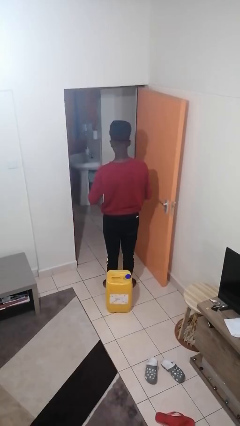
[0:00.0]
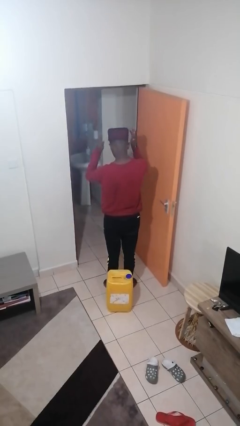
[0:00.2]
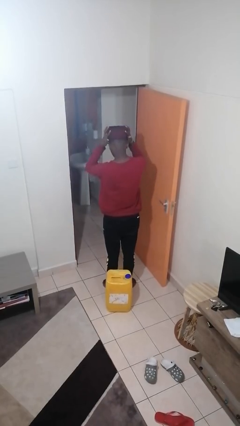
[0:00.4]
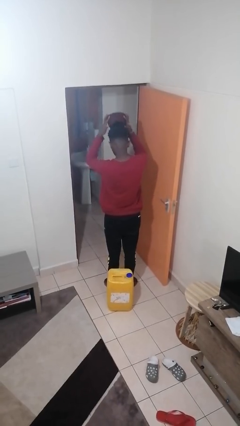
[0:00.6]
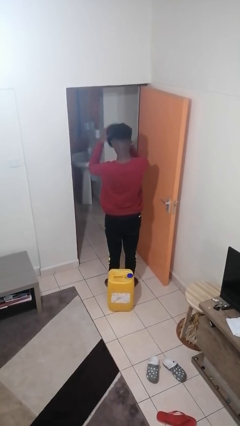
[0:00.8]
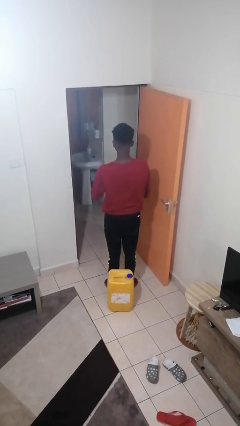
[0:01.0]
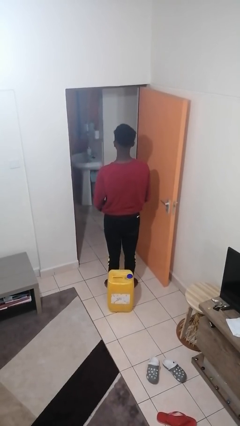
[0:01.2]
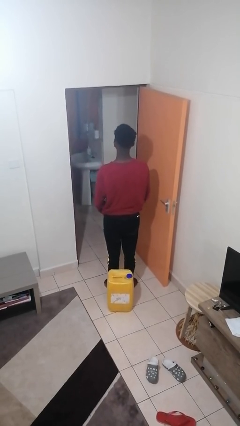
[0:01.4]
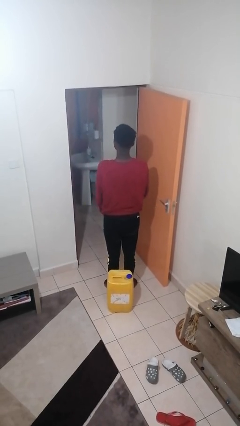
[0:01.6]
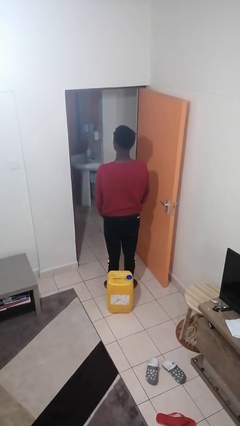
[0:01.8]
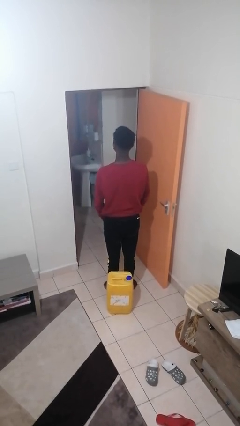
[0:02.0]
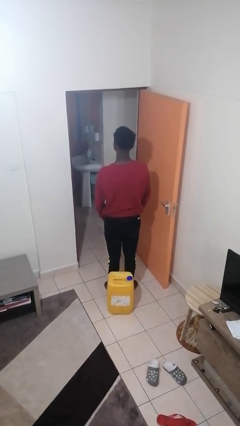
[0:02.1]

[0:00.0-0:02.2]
person takes off hat

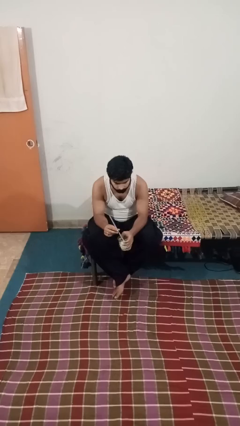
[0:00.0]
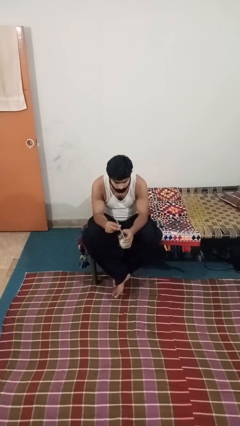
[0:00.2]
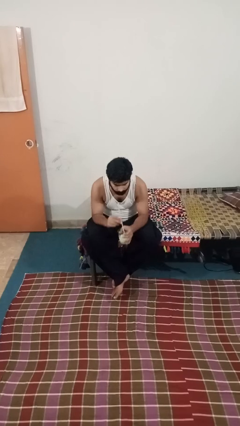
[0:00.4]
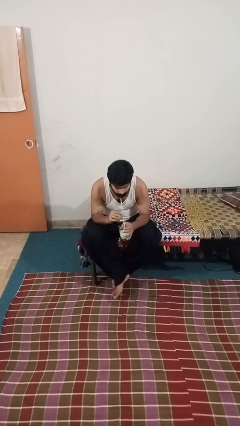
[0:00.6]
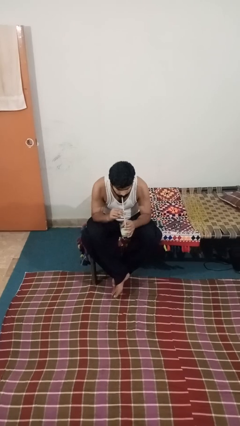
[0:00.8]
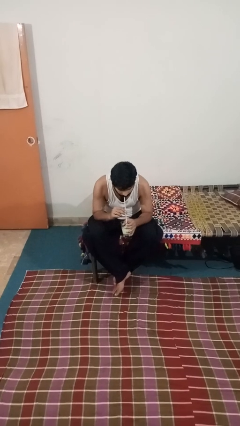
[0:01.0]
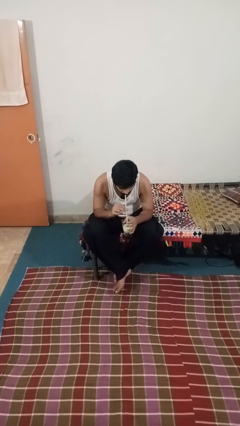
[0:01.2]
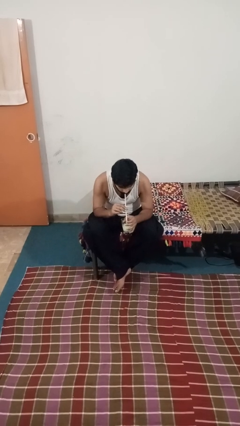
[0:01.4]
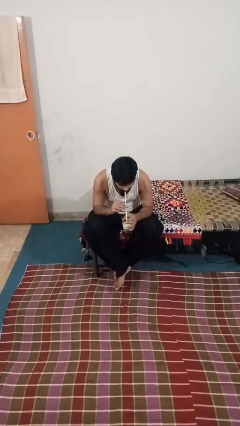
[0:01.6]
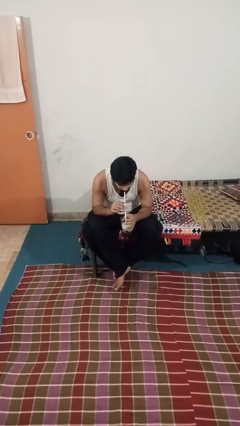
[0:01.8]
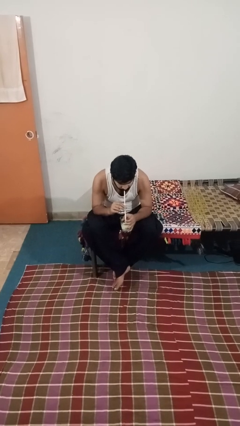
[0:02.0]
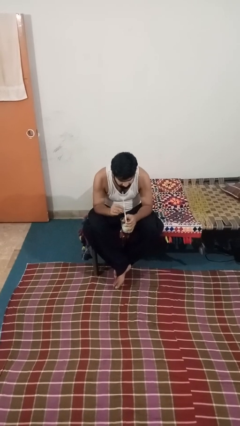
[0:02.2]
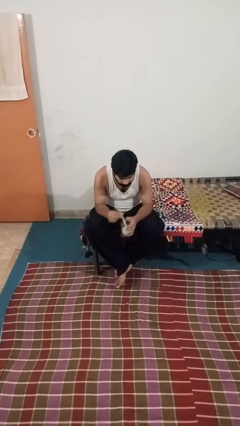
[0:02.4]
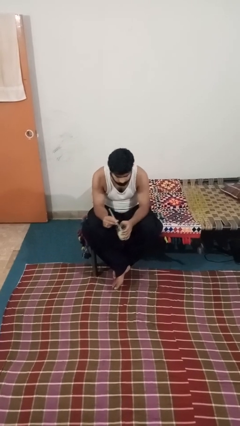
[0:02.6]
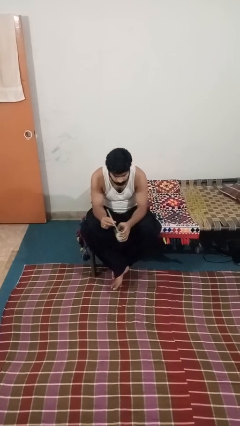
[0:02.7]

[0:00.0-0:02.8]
person drinks from straw

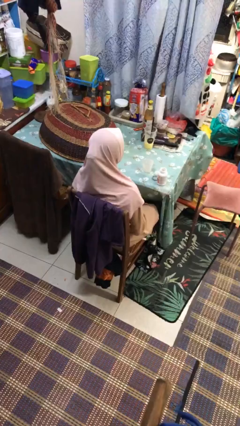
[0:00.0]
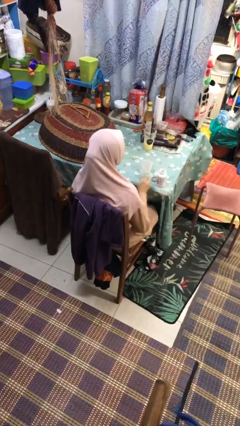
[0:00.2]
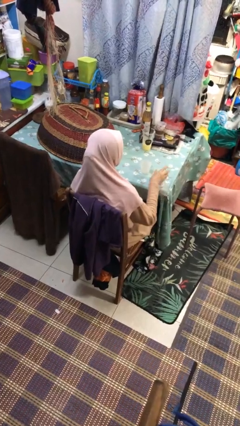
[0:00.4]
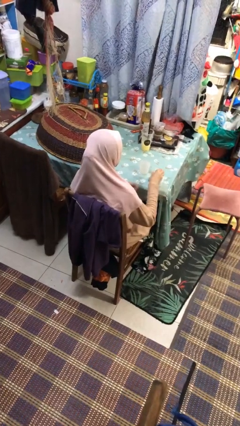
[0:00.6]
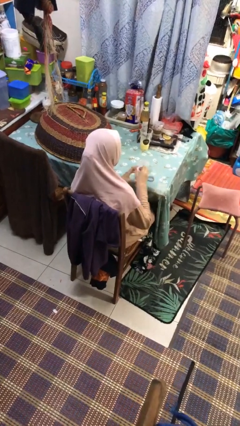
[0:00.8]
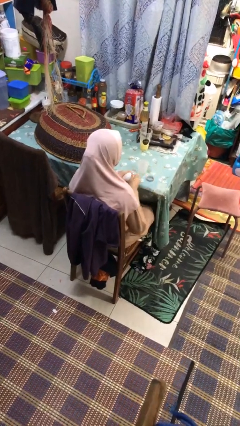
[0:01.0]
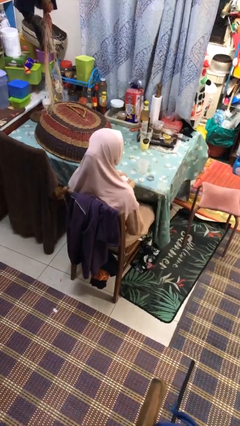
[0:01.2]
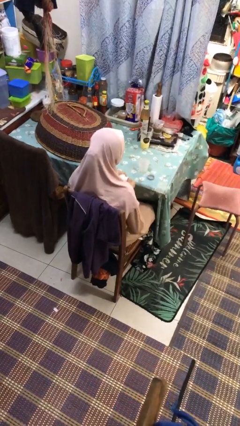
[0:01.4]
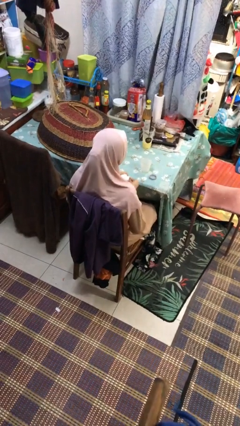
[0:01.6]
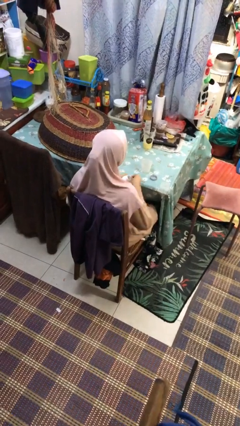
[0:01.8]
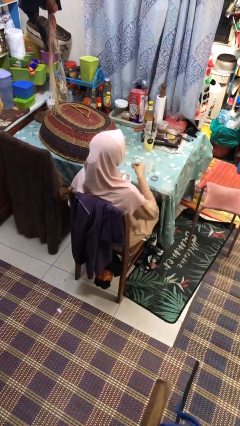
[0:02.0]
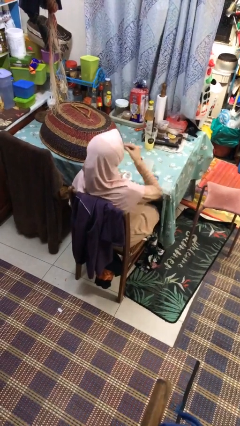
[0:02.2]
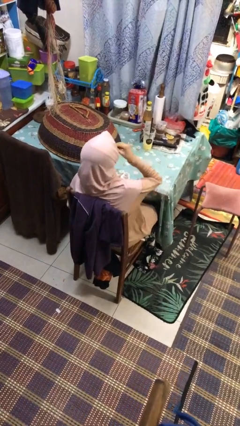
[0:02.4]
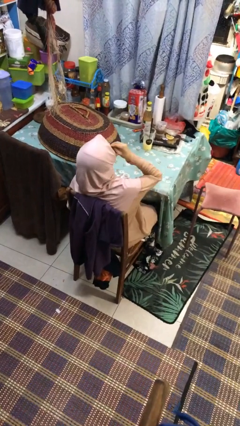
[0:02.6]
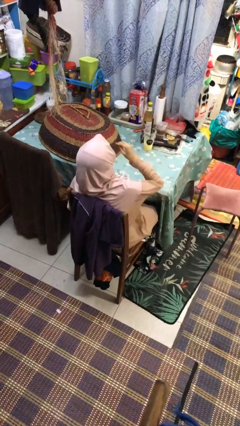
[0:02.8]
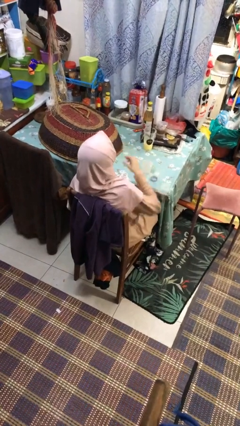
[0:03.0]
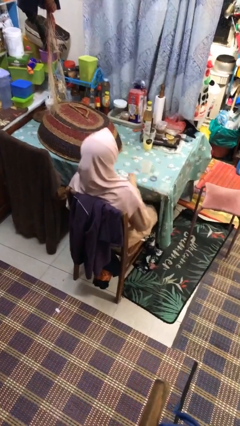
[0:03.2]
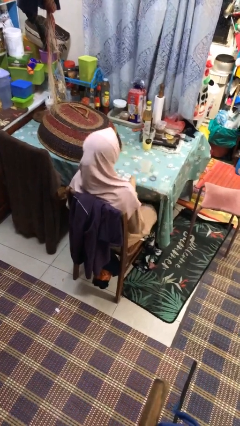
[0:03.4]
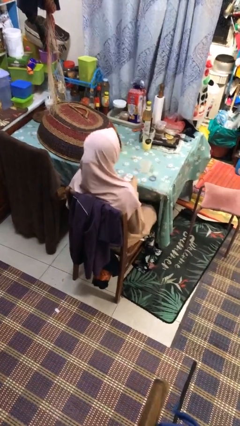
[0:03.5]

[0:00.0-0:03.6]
person takes medicine pills

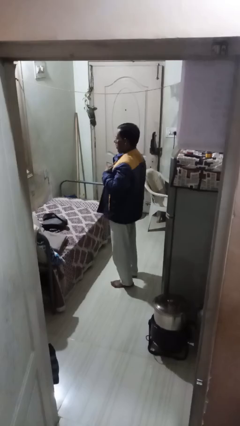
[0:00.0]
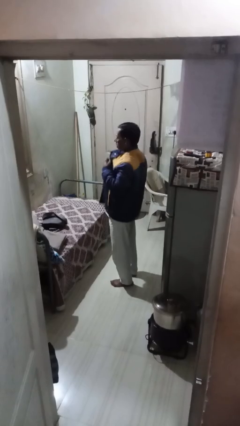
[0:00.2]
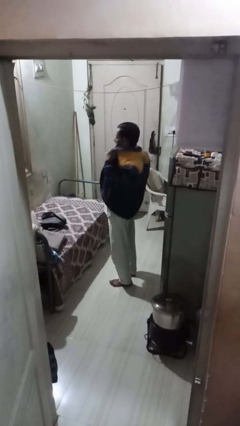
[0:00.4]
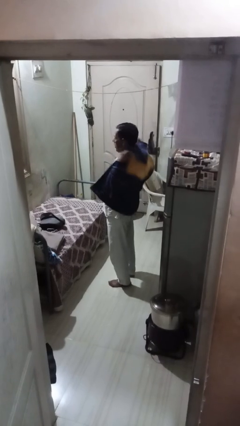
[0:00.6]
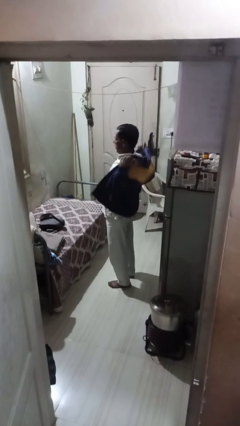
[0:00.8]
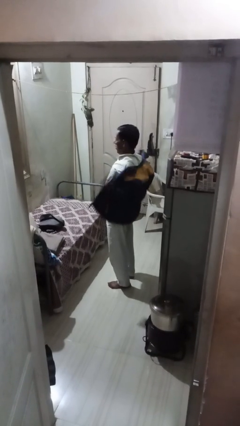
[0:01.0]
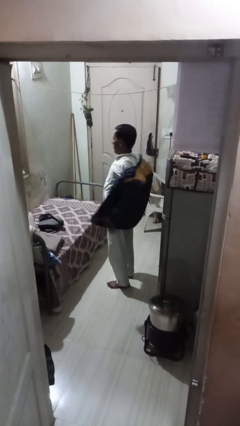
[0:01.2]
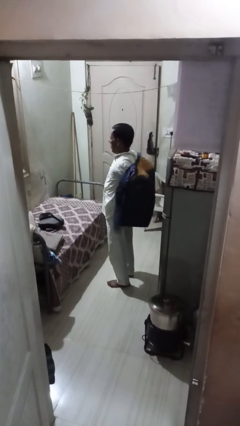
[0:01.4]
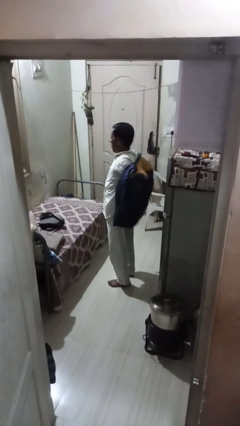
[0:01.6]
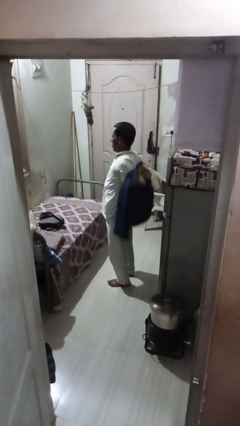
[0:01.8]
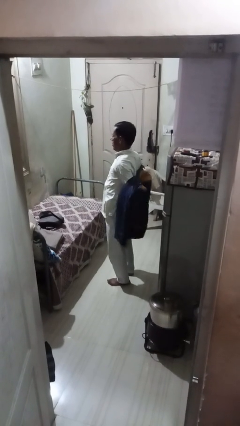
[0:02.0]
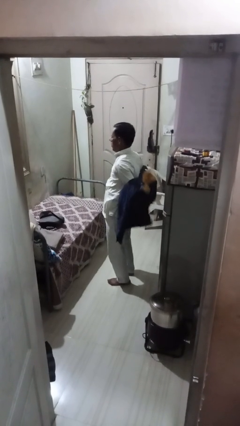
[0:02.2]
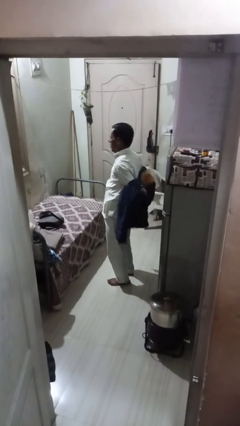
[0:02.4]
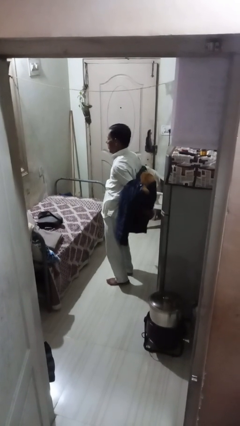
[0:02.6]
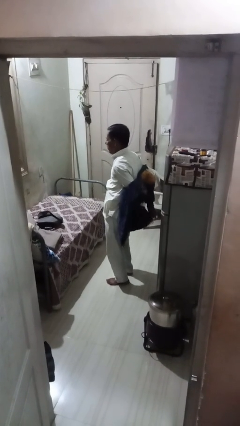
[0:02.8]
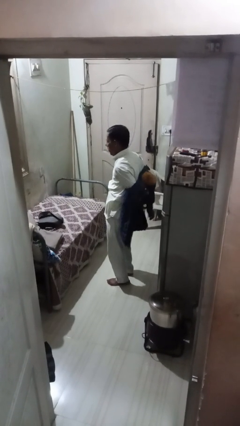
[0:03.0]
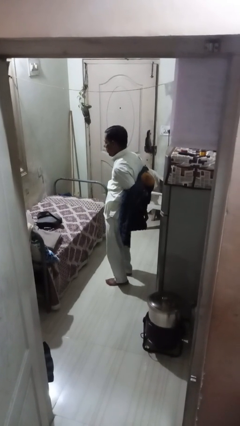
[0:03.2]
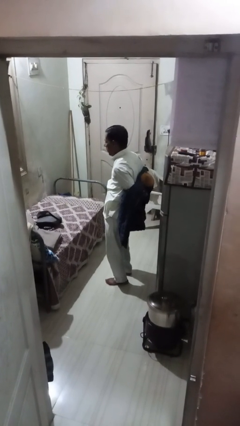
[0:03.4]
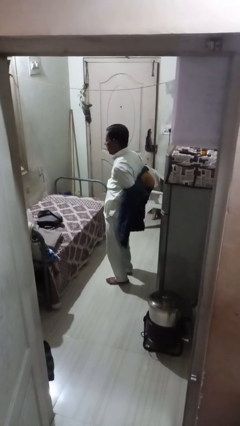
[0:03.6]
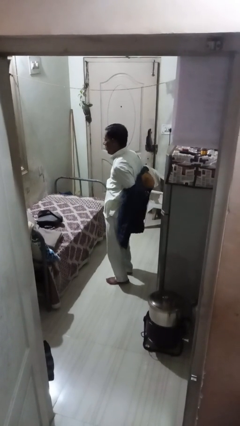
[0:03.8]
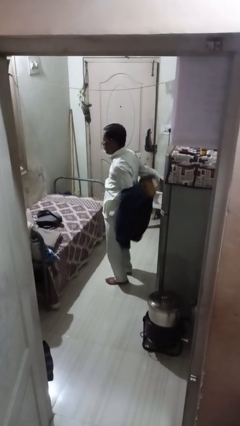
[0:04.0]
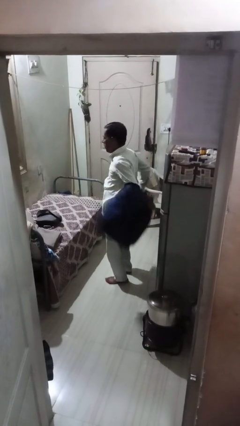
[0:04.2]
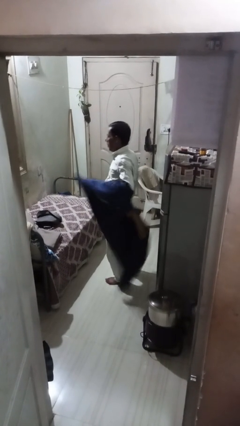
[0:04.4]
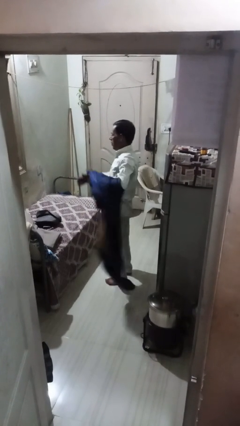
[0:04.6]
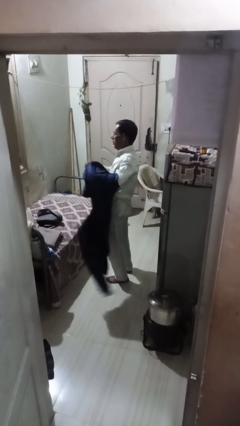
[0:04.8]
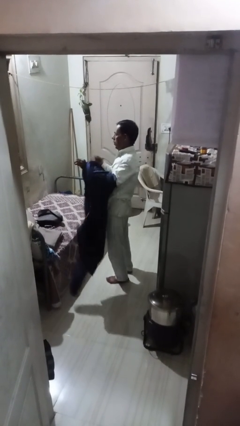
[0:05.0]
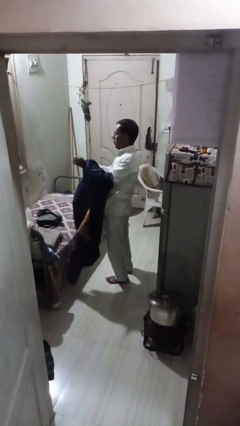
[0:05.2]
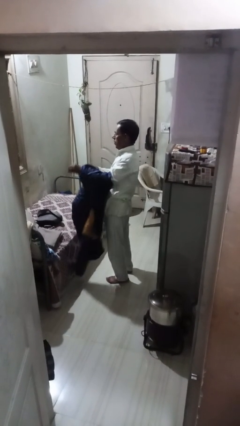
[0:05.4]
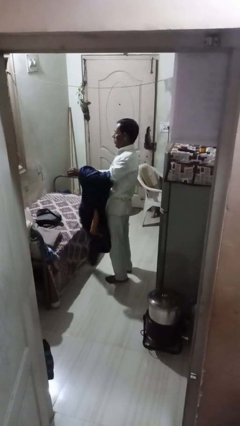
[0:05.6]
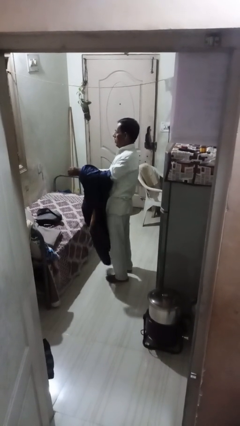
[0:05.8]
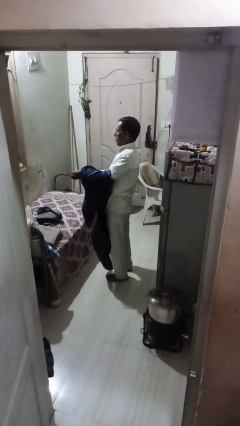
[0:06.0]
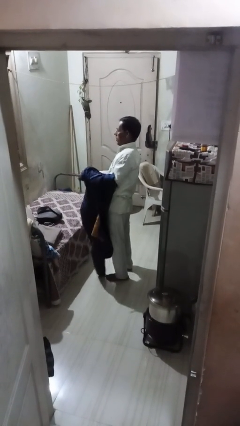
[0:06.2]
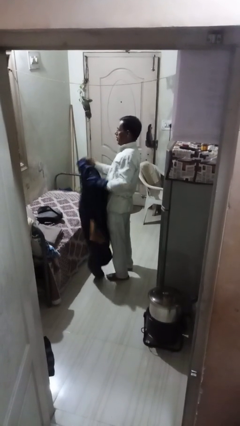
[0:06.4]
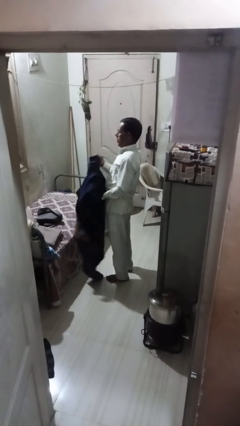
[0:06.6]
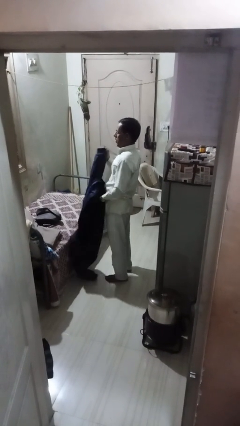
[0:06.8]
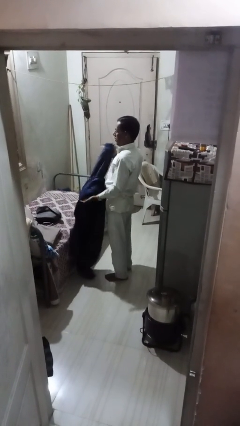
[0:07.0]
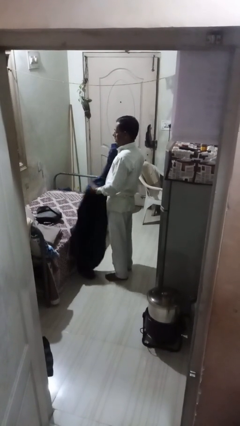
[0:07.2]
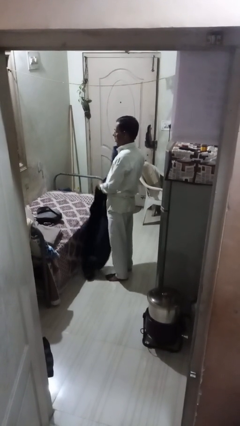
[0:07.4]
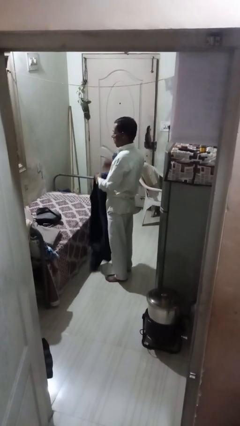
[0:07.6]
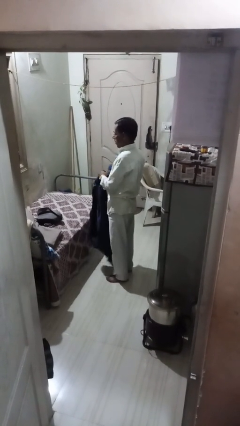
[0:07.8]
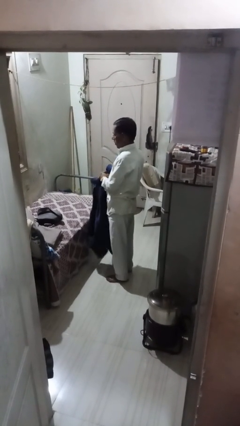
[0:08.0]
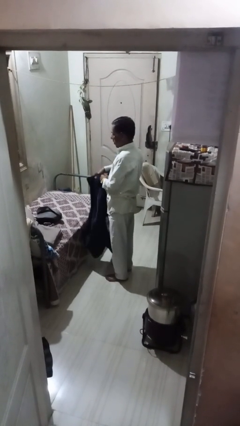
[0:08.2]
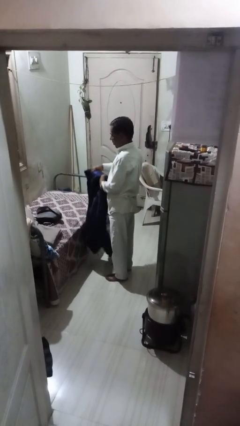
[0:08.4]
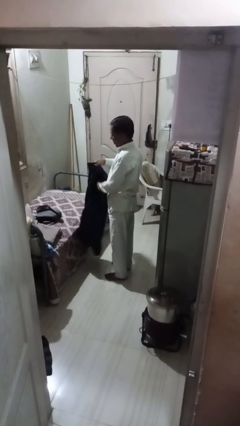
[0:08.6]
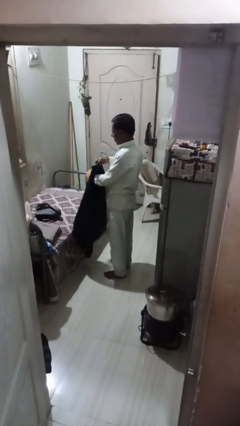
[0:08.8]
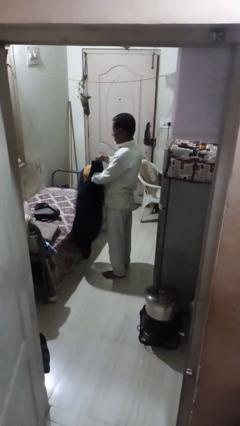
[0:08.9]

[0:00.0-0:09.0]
person takes off jacket
